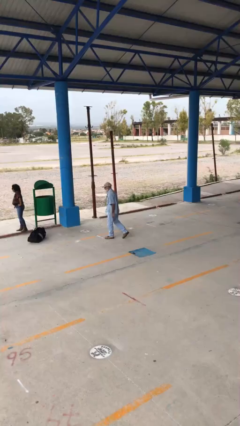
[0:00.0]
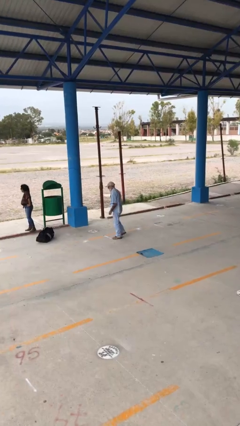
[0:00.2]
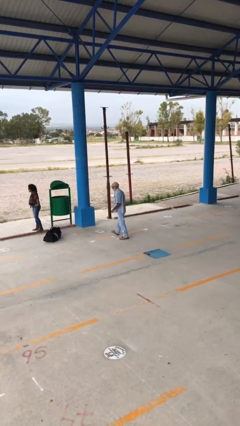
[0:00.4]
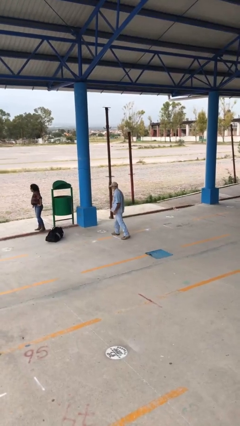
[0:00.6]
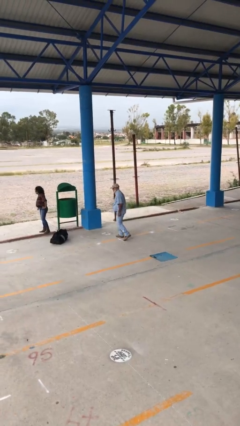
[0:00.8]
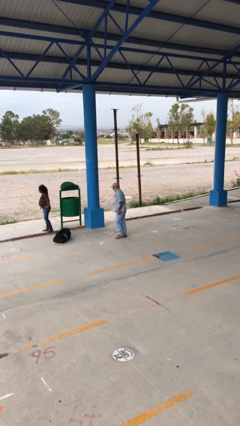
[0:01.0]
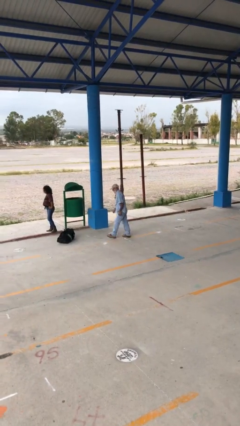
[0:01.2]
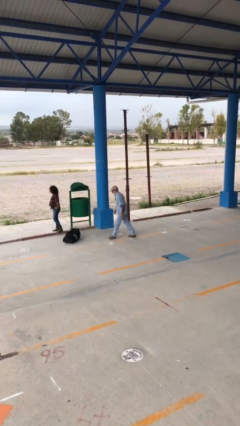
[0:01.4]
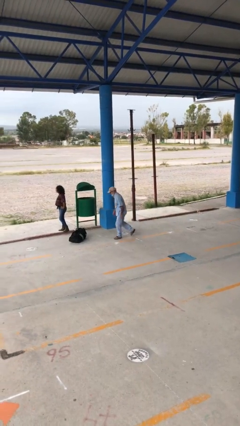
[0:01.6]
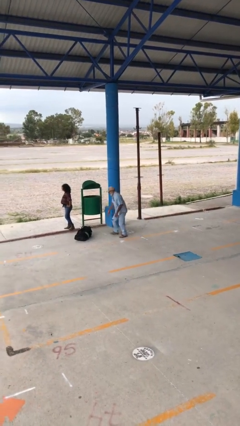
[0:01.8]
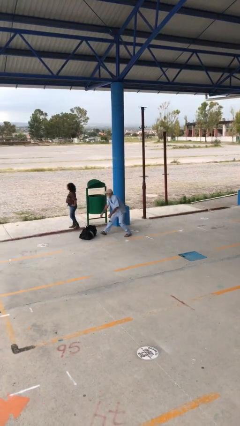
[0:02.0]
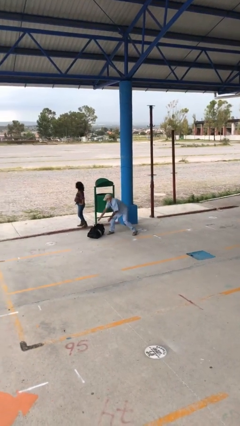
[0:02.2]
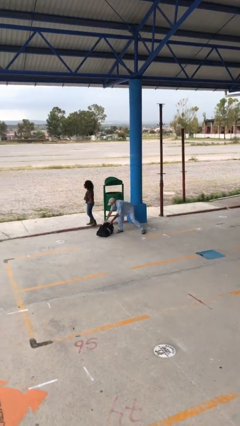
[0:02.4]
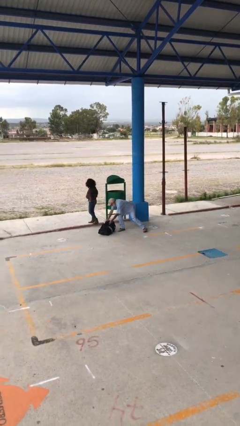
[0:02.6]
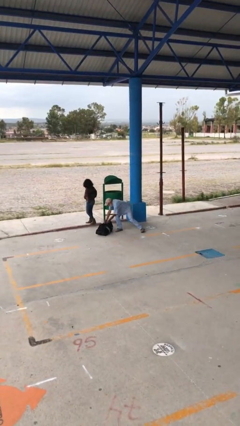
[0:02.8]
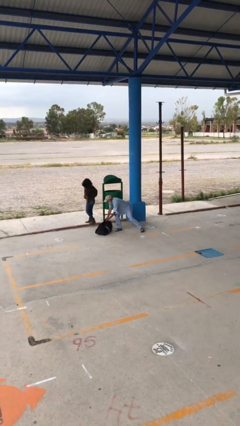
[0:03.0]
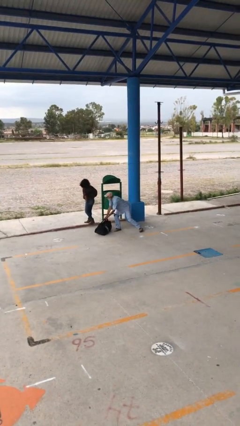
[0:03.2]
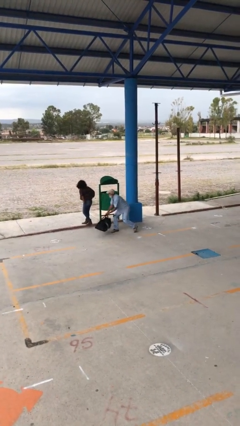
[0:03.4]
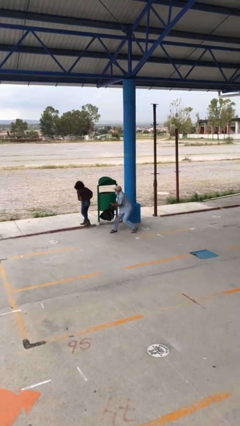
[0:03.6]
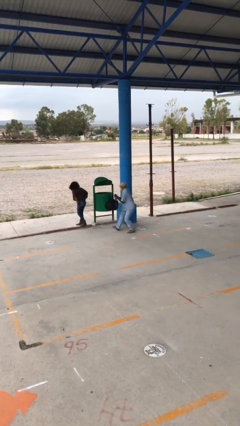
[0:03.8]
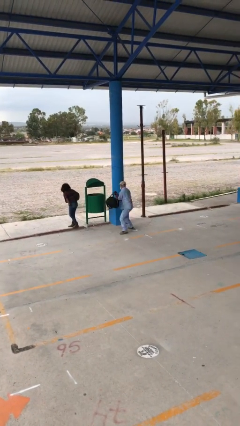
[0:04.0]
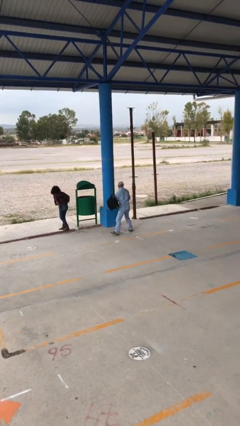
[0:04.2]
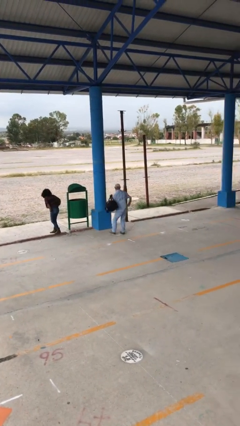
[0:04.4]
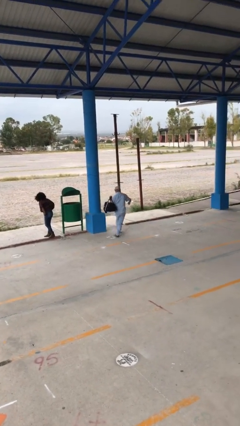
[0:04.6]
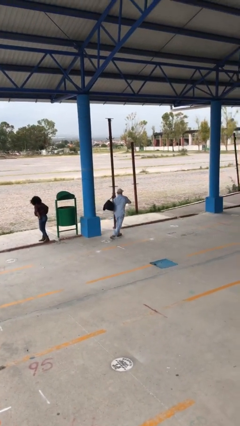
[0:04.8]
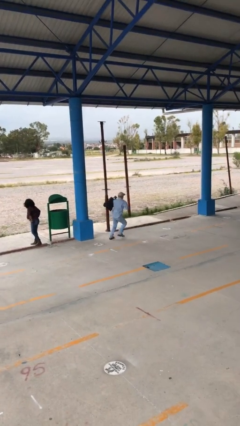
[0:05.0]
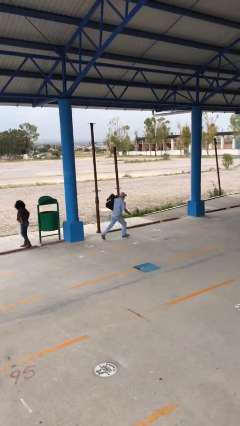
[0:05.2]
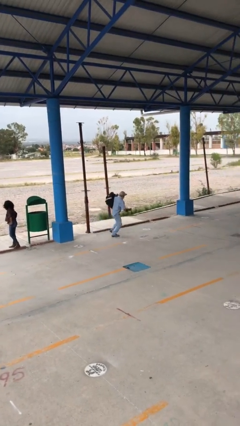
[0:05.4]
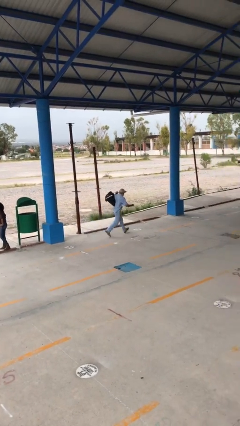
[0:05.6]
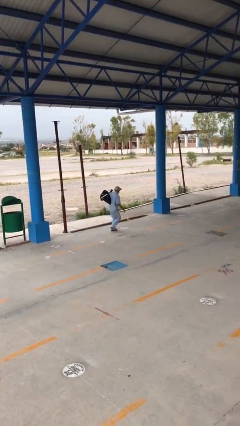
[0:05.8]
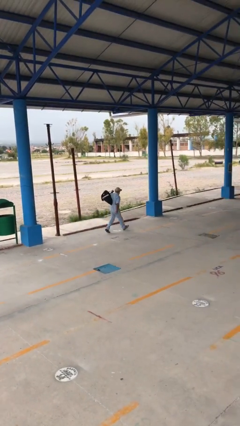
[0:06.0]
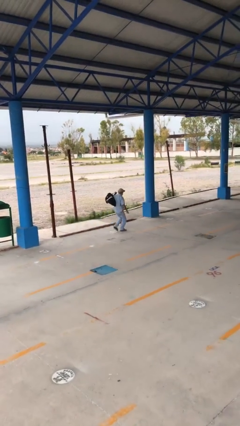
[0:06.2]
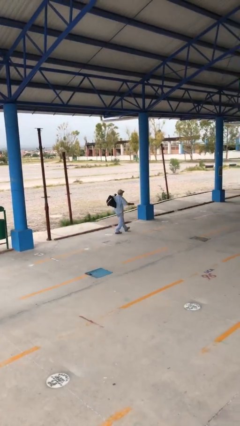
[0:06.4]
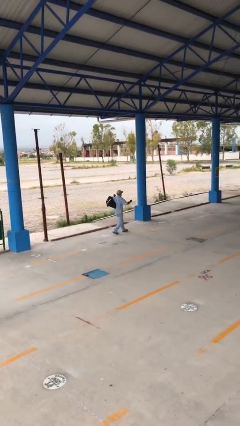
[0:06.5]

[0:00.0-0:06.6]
person steals object from person

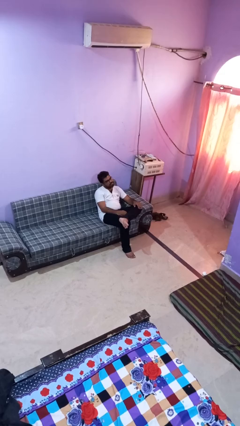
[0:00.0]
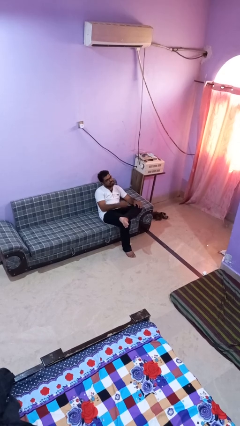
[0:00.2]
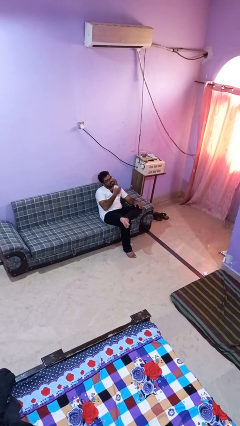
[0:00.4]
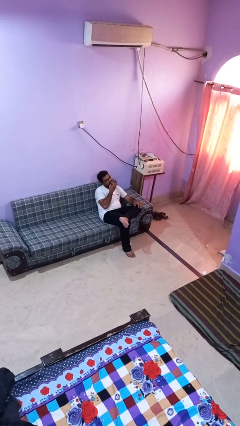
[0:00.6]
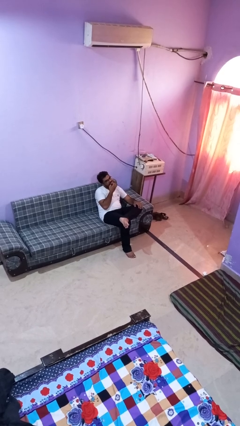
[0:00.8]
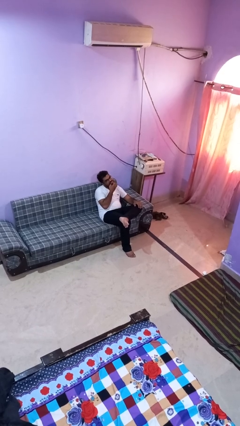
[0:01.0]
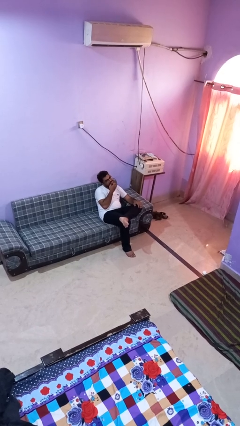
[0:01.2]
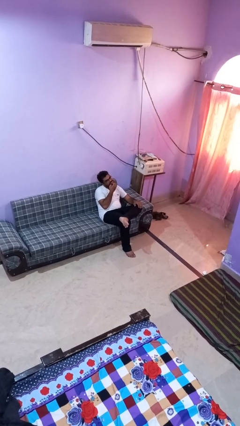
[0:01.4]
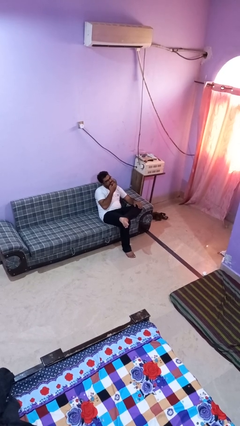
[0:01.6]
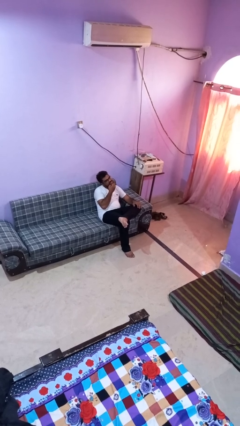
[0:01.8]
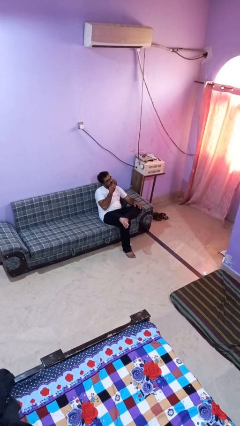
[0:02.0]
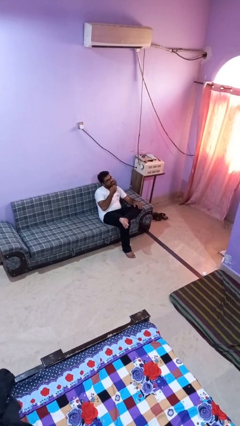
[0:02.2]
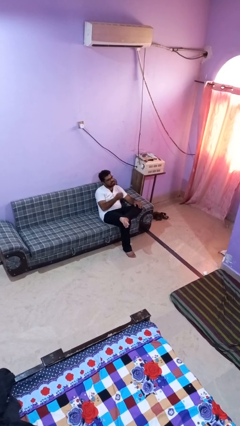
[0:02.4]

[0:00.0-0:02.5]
person strokes chin

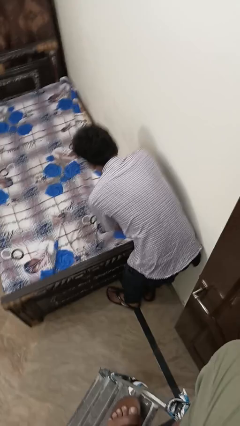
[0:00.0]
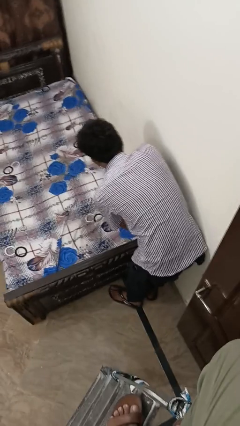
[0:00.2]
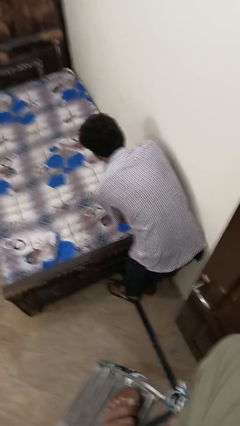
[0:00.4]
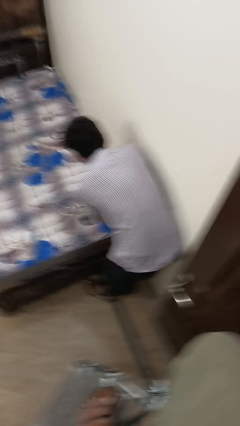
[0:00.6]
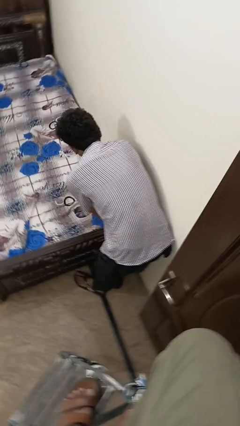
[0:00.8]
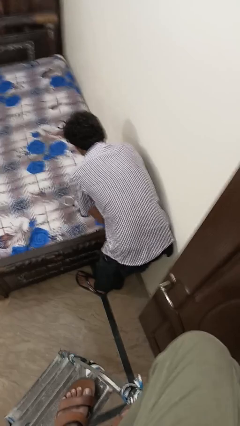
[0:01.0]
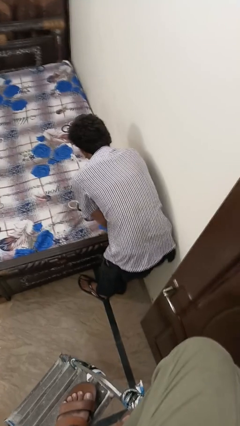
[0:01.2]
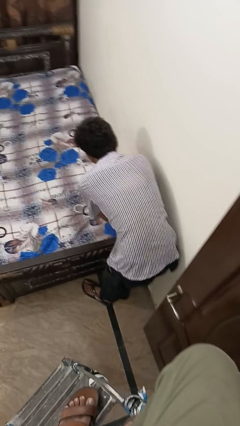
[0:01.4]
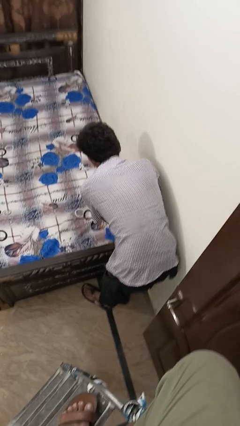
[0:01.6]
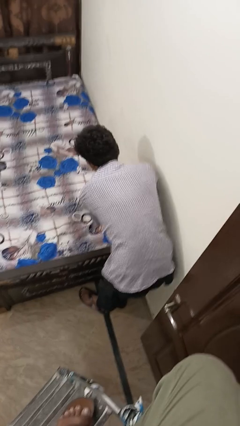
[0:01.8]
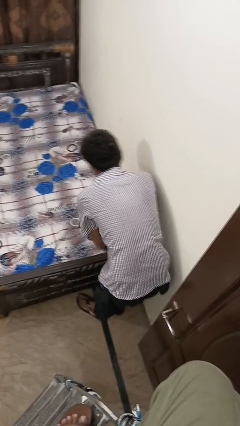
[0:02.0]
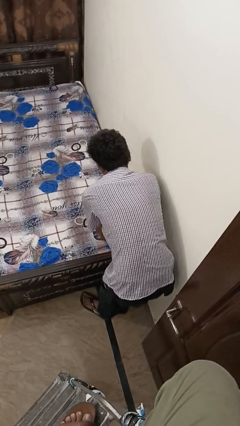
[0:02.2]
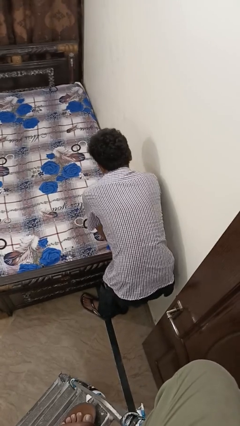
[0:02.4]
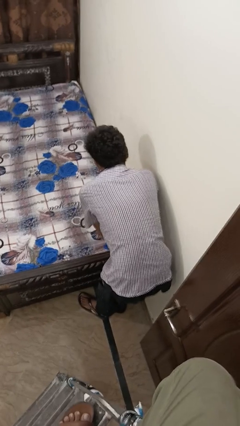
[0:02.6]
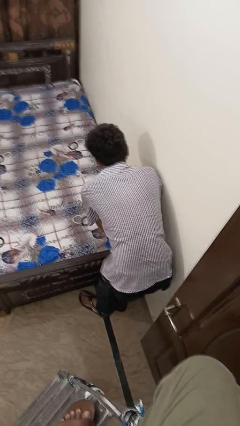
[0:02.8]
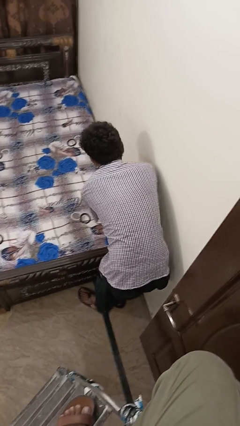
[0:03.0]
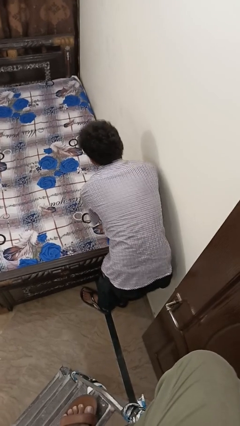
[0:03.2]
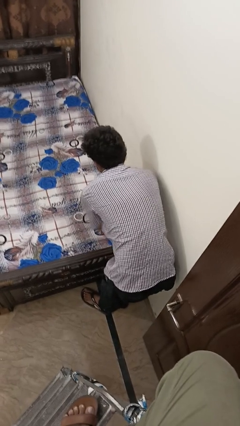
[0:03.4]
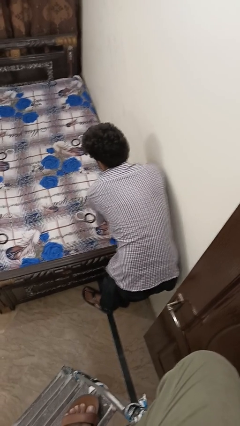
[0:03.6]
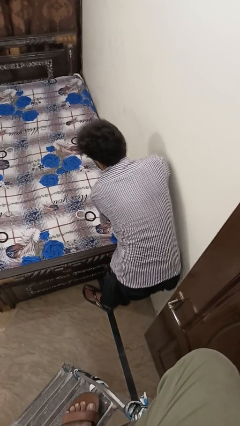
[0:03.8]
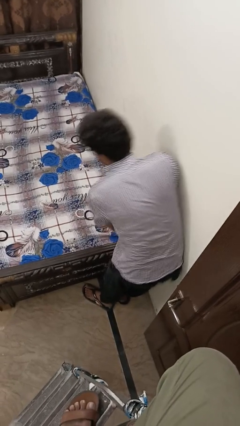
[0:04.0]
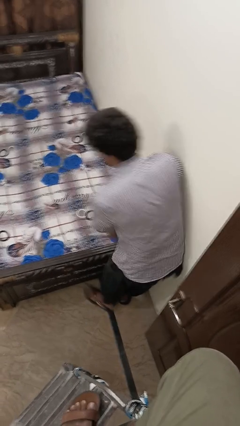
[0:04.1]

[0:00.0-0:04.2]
person makes bed

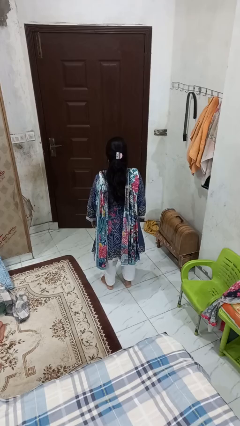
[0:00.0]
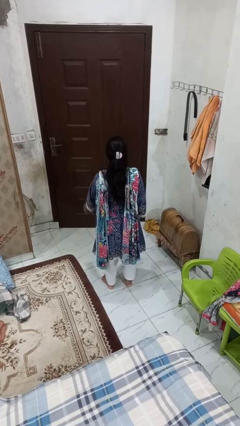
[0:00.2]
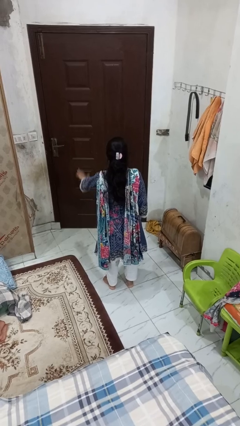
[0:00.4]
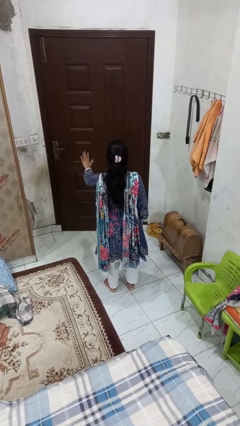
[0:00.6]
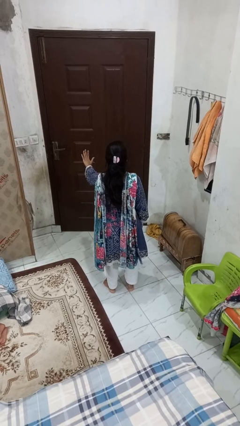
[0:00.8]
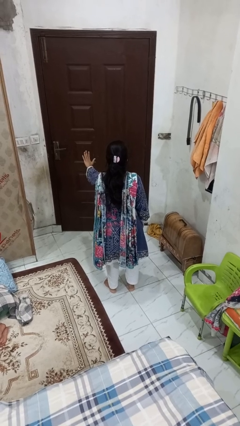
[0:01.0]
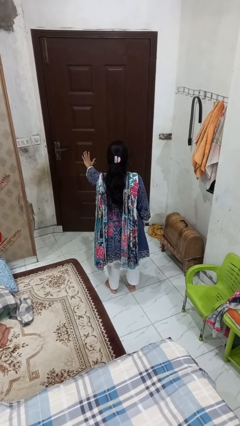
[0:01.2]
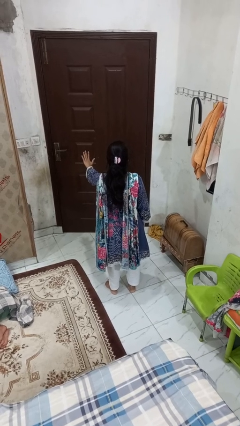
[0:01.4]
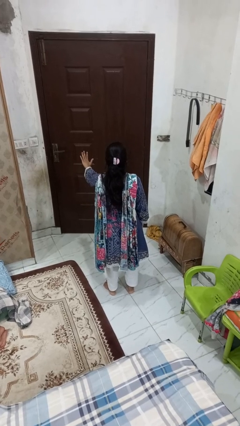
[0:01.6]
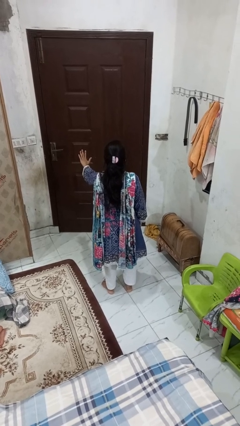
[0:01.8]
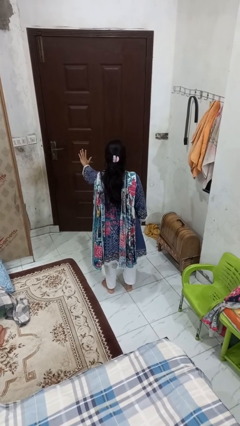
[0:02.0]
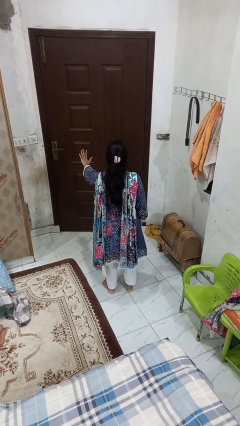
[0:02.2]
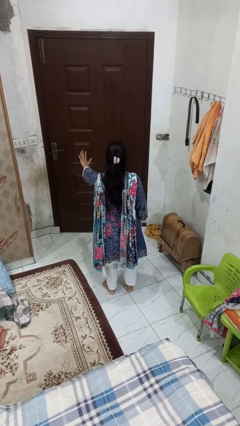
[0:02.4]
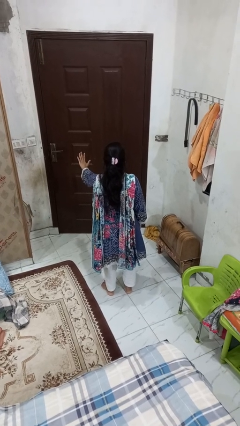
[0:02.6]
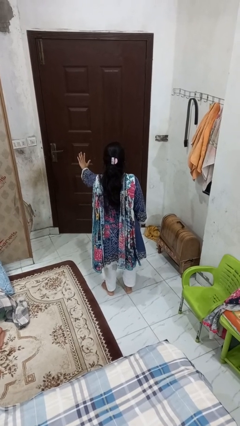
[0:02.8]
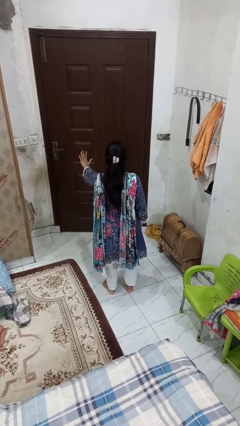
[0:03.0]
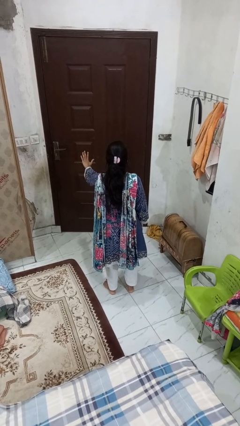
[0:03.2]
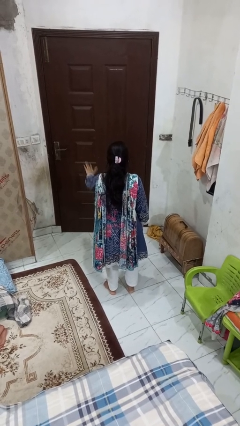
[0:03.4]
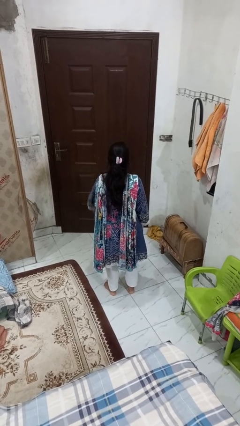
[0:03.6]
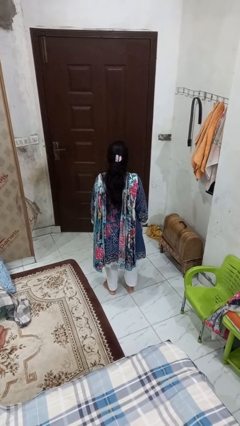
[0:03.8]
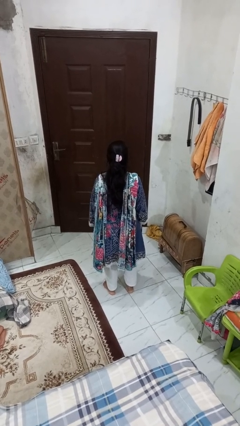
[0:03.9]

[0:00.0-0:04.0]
person gestures stop

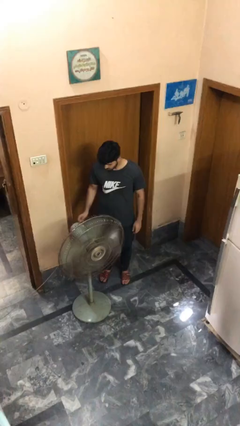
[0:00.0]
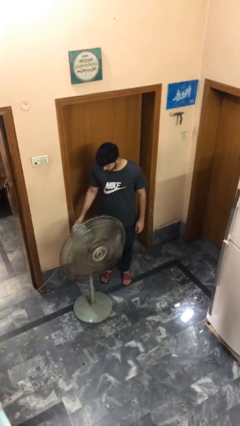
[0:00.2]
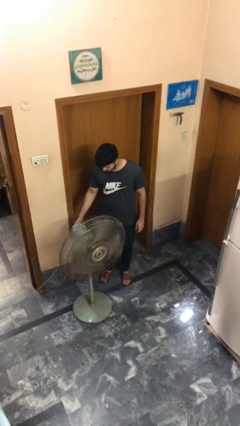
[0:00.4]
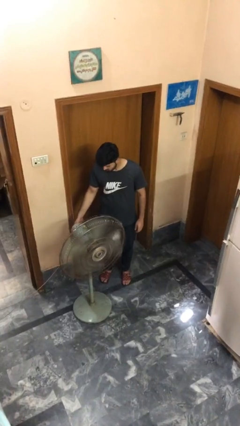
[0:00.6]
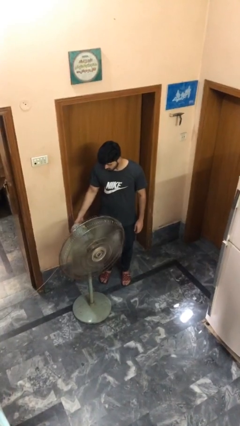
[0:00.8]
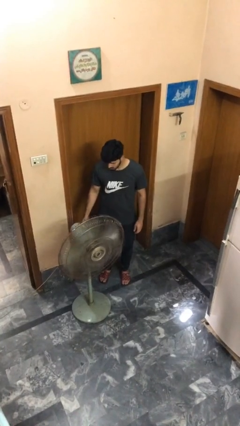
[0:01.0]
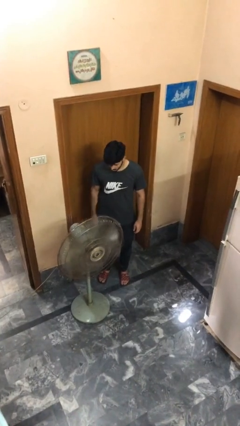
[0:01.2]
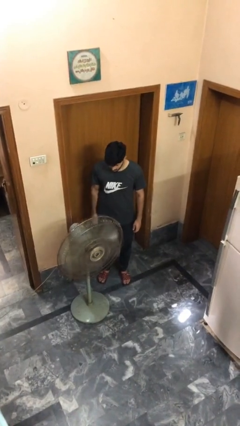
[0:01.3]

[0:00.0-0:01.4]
person turns on fan
